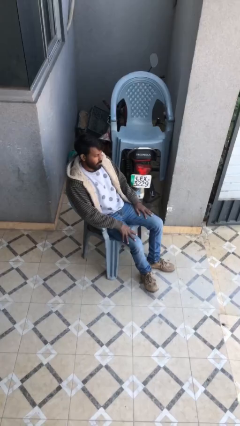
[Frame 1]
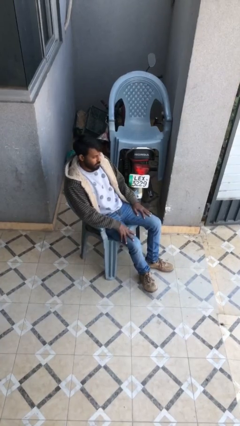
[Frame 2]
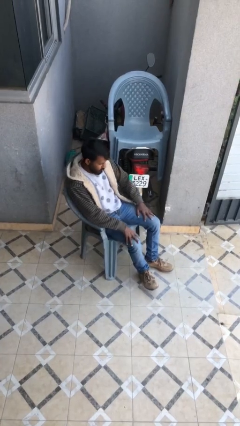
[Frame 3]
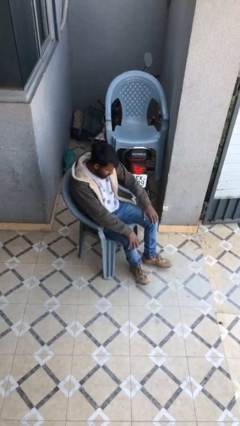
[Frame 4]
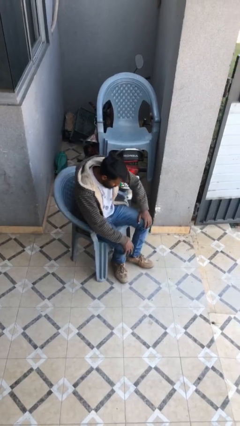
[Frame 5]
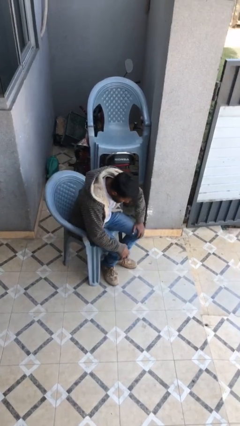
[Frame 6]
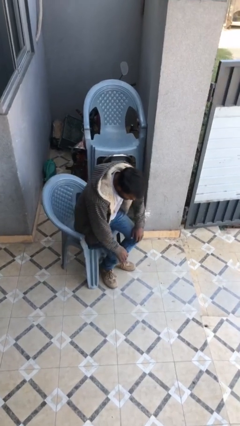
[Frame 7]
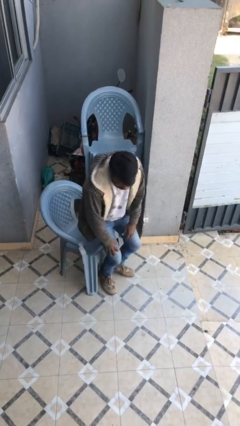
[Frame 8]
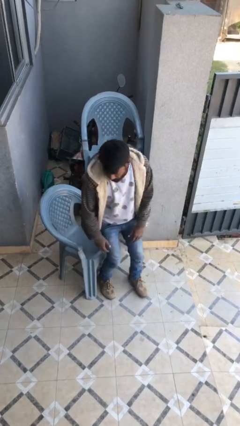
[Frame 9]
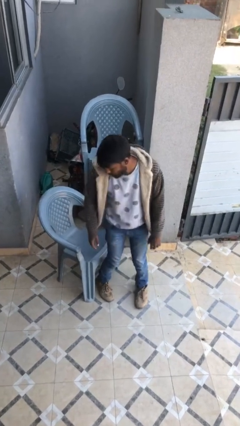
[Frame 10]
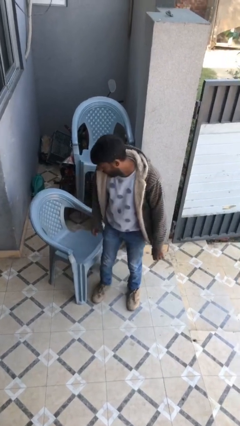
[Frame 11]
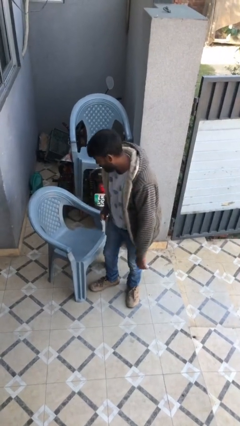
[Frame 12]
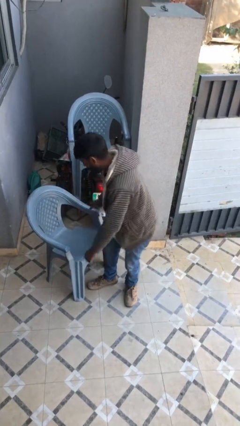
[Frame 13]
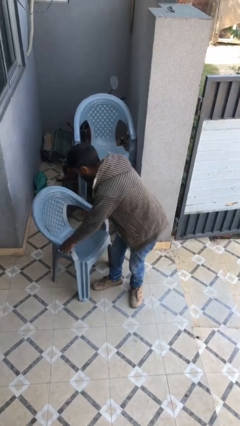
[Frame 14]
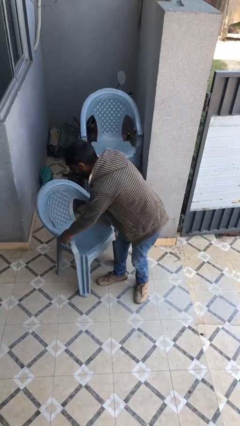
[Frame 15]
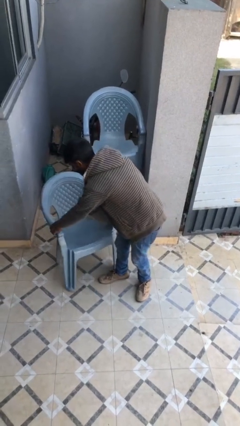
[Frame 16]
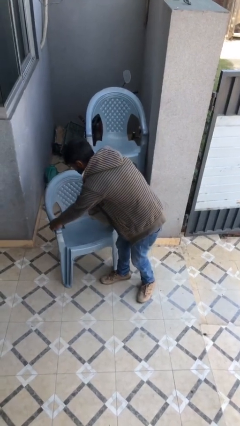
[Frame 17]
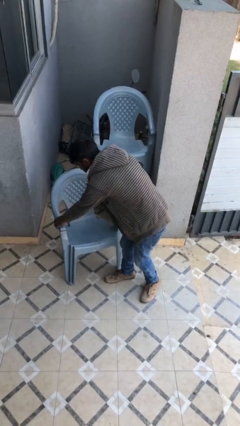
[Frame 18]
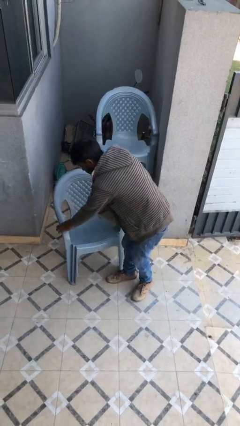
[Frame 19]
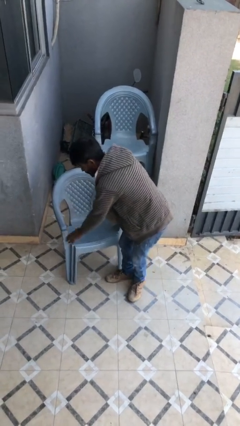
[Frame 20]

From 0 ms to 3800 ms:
person stands up

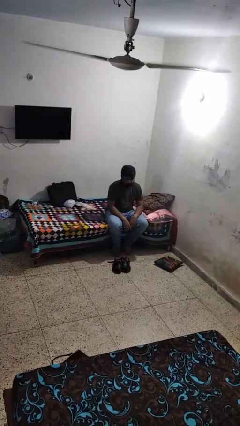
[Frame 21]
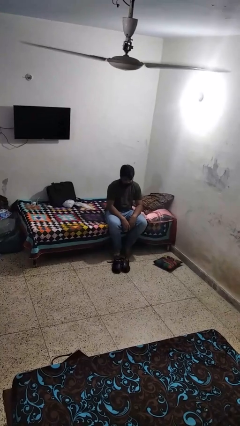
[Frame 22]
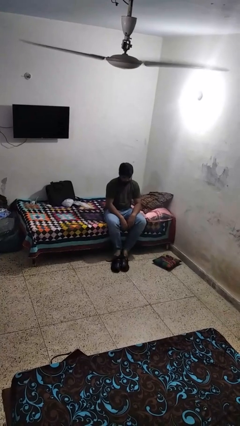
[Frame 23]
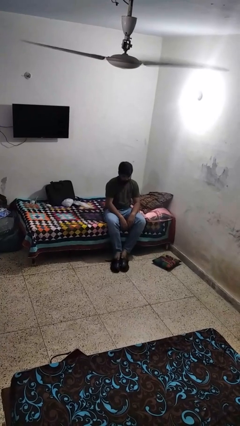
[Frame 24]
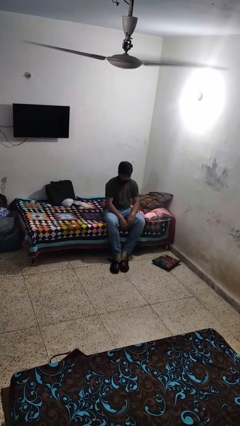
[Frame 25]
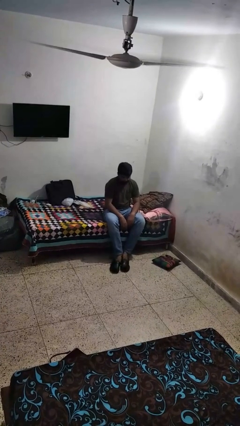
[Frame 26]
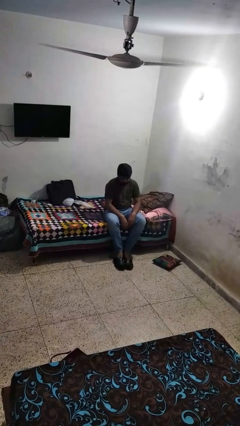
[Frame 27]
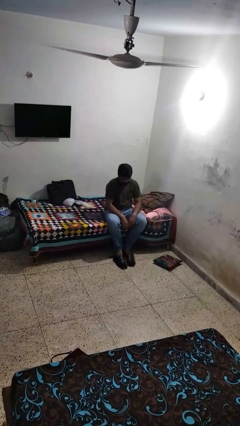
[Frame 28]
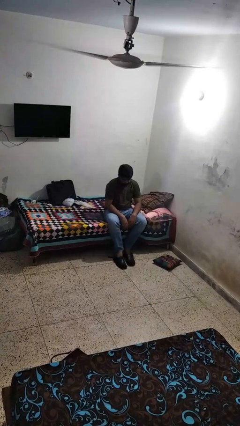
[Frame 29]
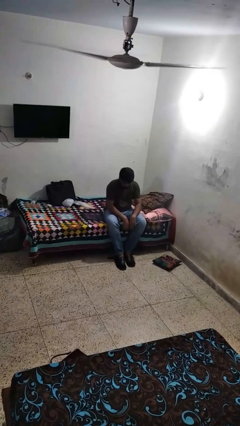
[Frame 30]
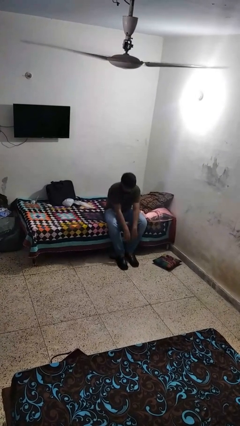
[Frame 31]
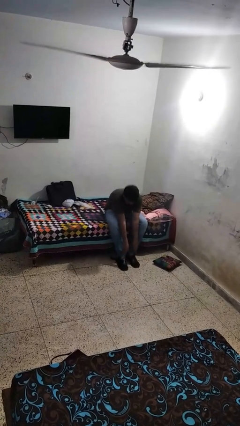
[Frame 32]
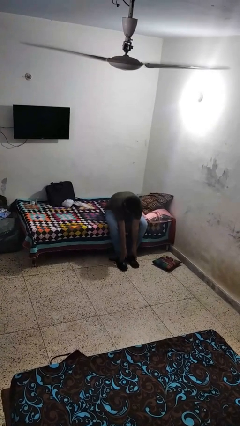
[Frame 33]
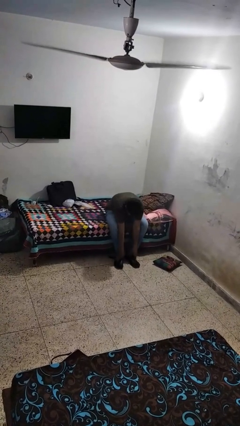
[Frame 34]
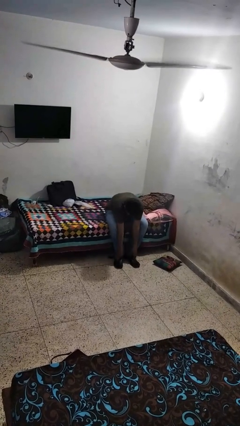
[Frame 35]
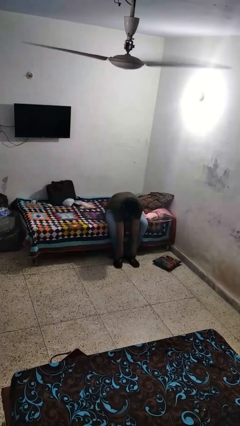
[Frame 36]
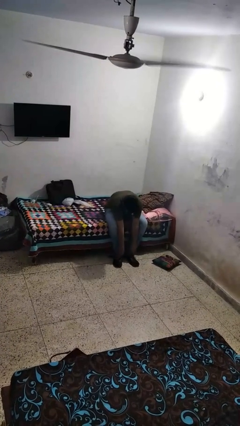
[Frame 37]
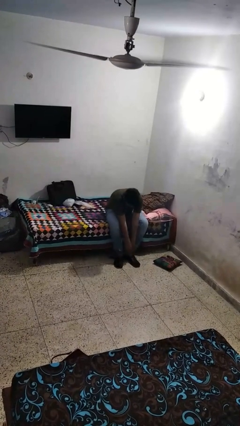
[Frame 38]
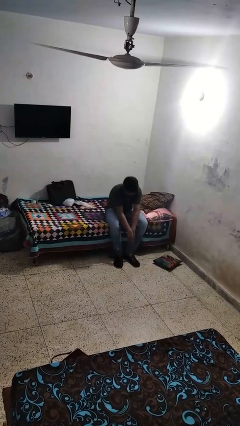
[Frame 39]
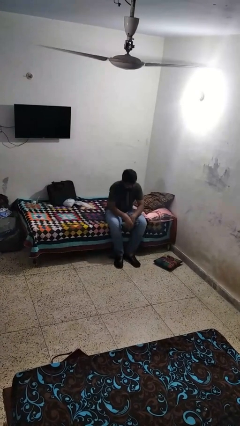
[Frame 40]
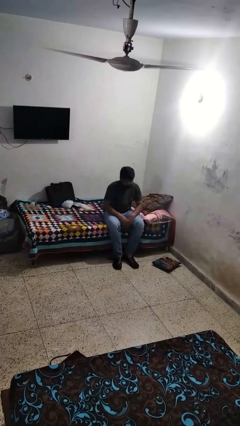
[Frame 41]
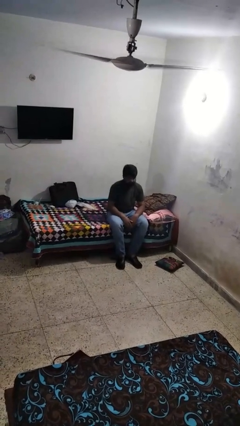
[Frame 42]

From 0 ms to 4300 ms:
person puts on shoes

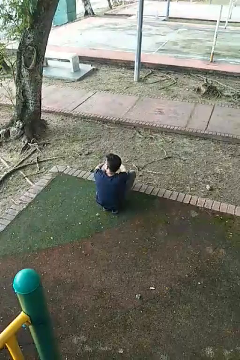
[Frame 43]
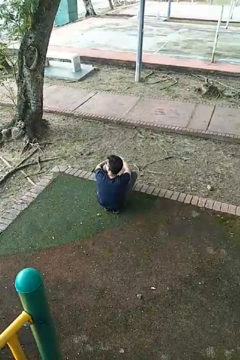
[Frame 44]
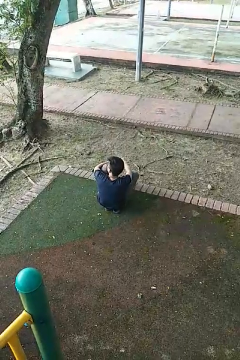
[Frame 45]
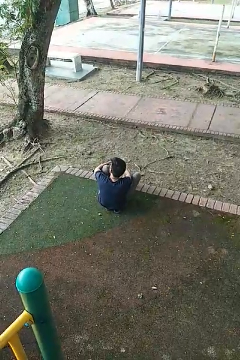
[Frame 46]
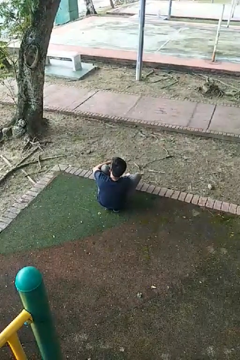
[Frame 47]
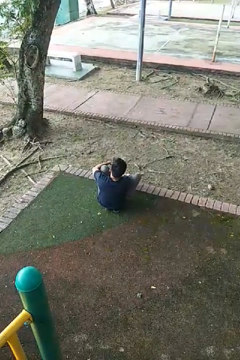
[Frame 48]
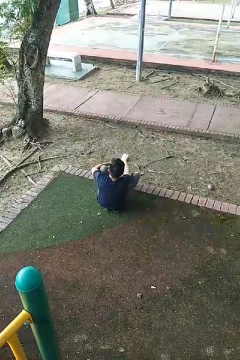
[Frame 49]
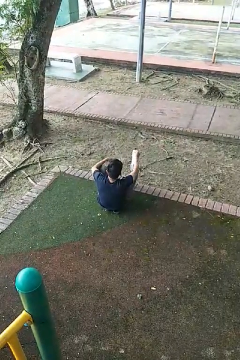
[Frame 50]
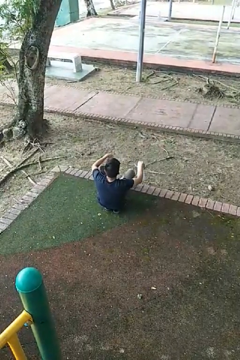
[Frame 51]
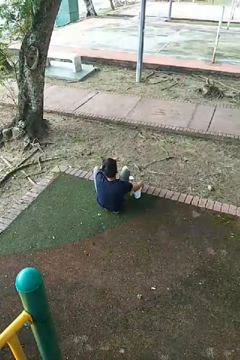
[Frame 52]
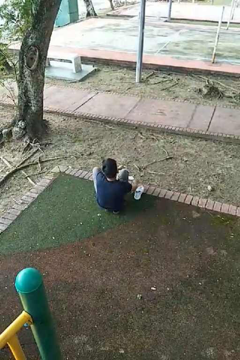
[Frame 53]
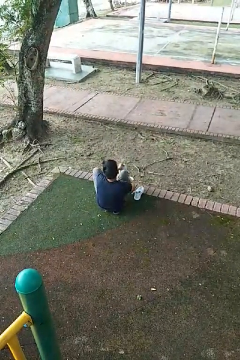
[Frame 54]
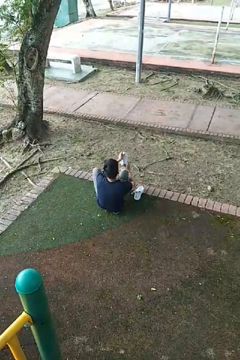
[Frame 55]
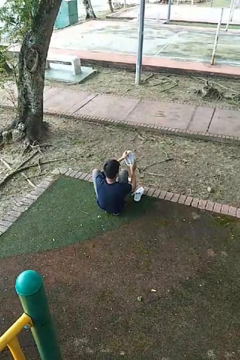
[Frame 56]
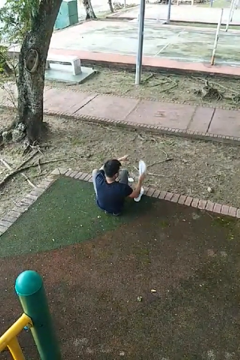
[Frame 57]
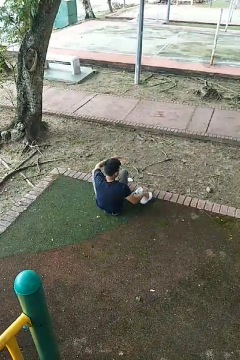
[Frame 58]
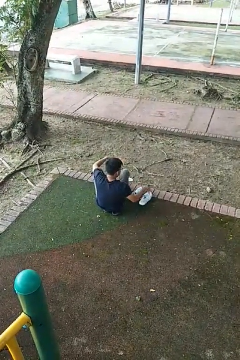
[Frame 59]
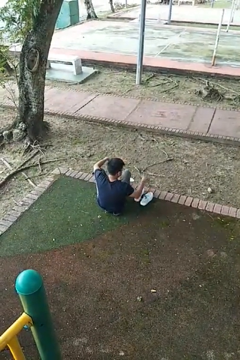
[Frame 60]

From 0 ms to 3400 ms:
person takes off shoes

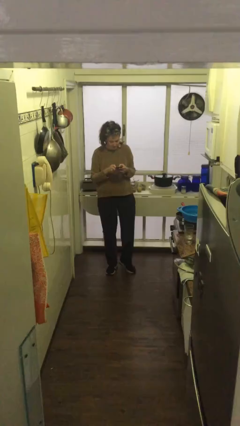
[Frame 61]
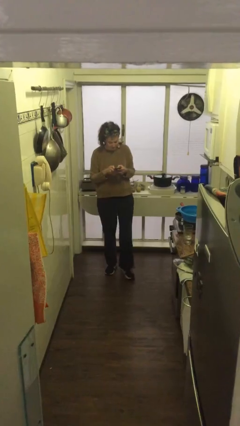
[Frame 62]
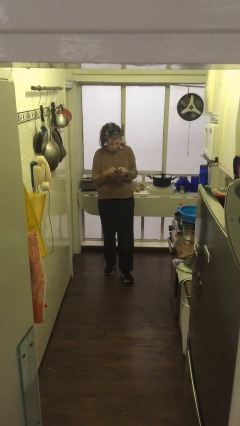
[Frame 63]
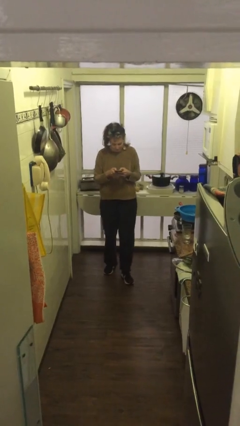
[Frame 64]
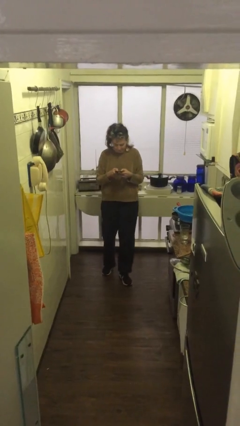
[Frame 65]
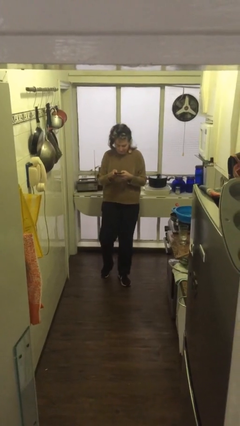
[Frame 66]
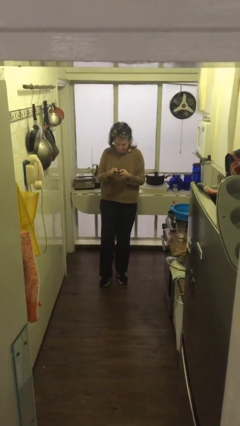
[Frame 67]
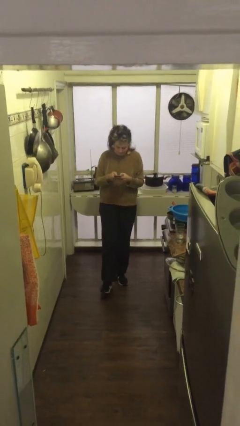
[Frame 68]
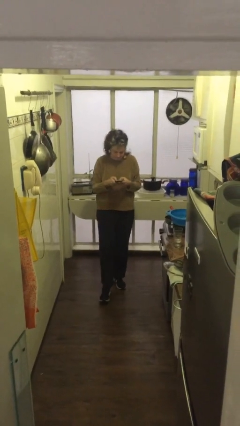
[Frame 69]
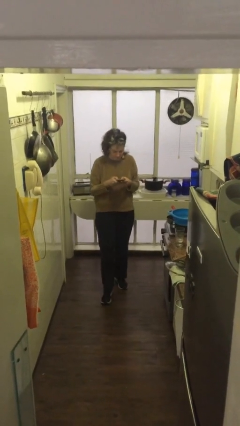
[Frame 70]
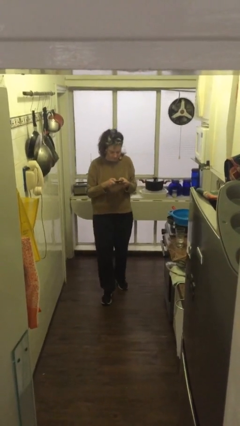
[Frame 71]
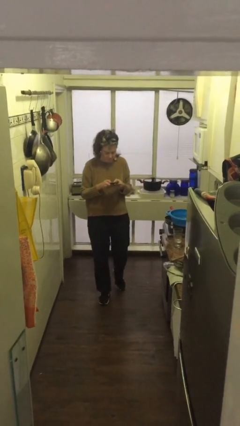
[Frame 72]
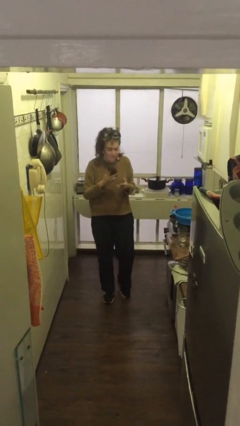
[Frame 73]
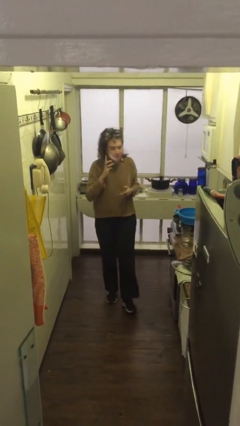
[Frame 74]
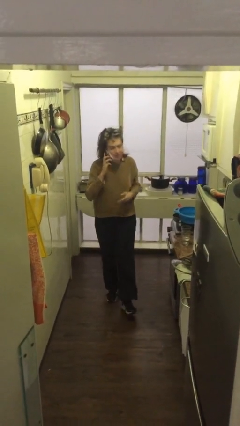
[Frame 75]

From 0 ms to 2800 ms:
person texts on phone

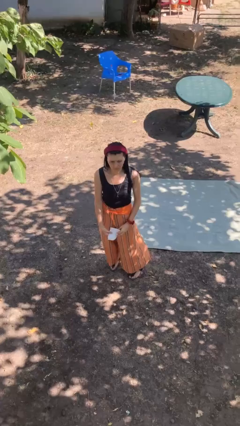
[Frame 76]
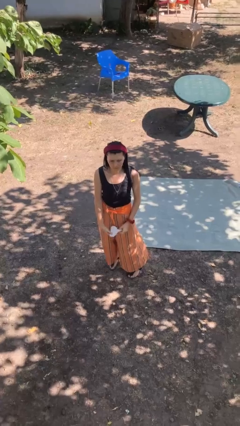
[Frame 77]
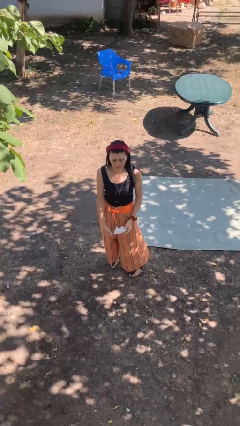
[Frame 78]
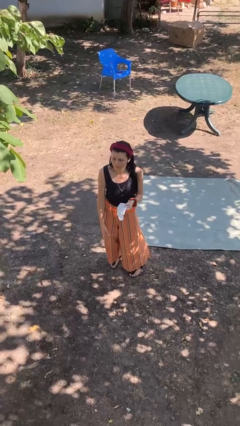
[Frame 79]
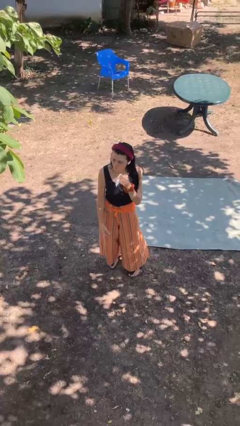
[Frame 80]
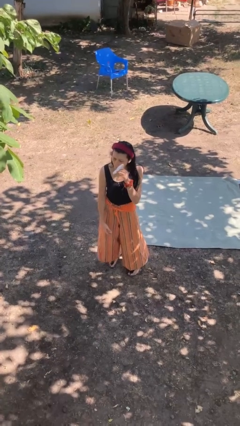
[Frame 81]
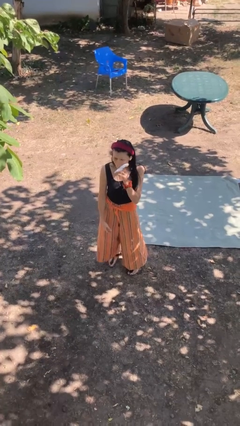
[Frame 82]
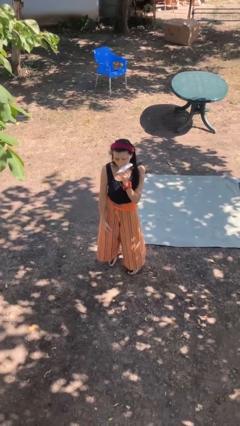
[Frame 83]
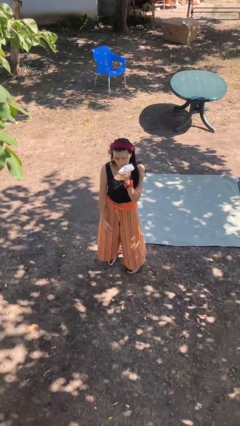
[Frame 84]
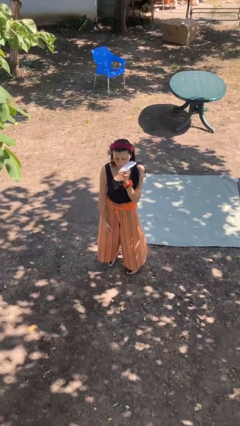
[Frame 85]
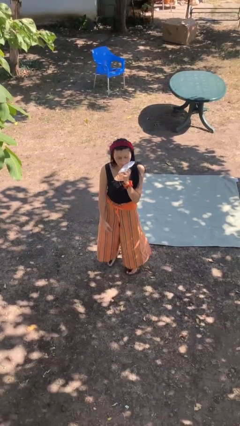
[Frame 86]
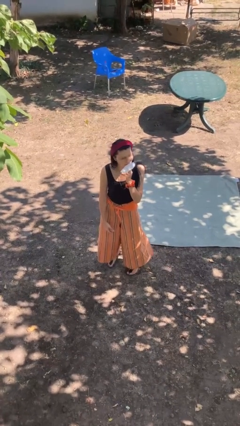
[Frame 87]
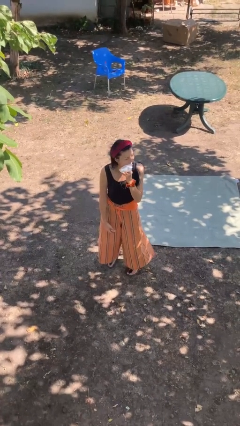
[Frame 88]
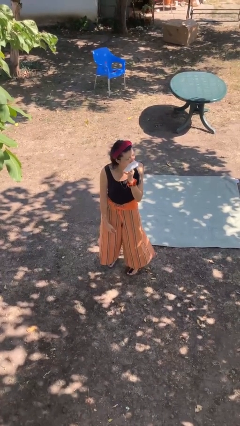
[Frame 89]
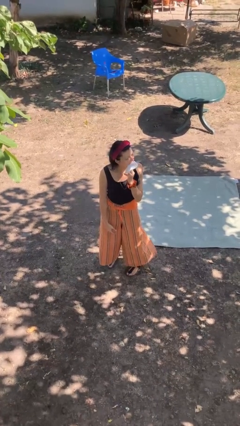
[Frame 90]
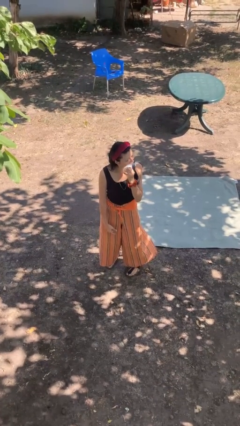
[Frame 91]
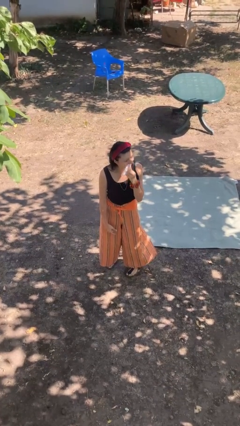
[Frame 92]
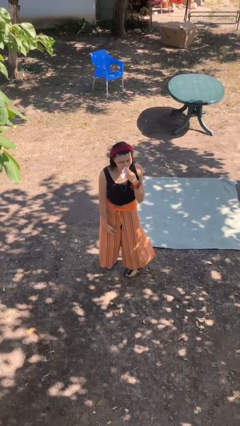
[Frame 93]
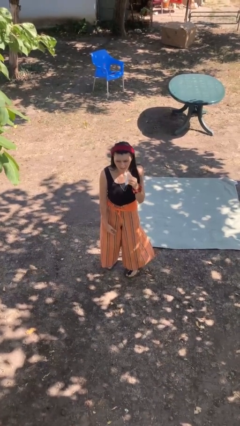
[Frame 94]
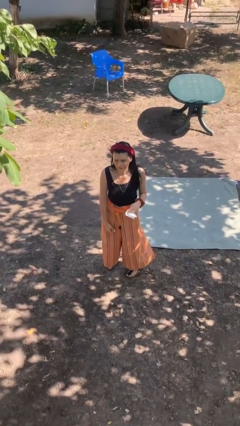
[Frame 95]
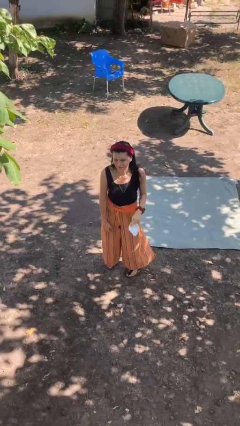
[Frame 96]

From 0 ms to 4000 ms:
person wipes mouth with napkin

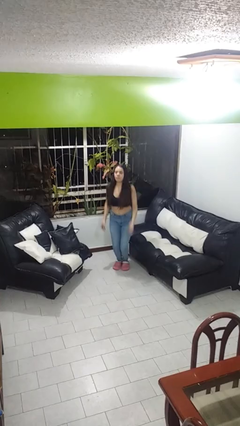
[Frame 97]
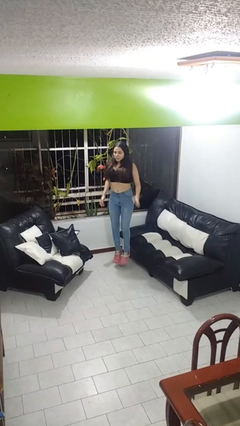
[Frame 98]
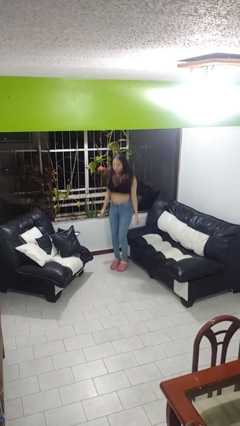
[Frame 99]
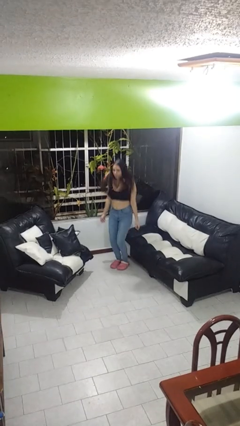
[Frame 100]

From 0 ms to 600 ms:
person jumps
